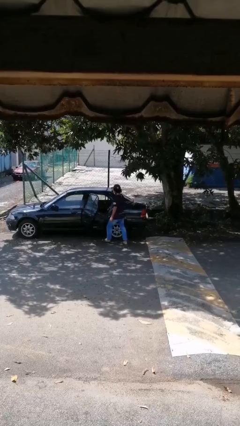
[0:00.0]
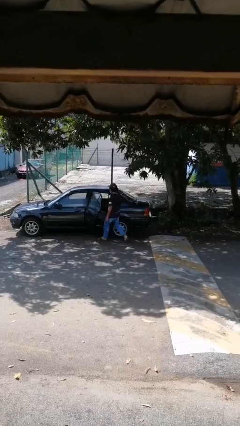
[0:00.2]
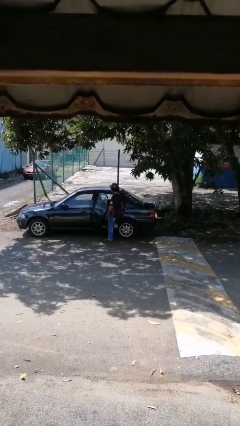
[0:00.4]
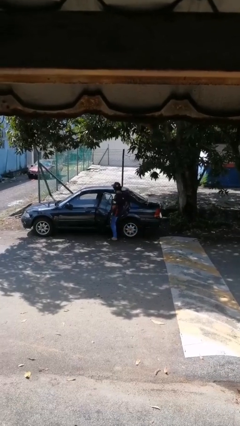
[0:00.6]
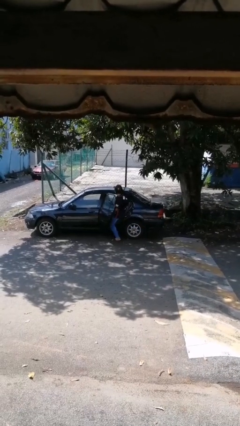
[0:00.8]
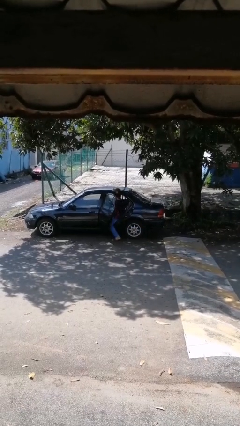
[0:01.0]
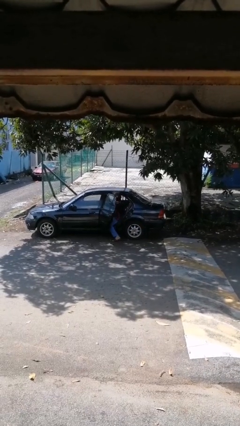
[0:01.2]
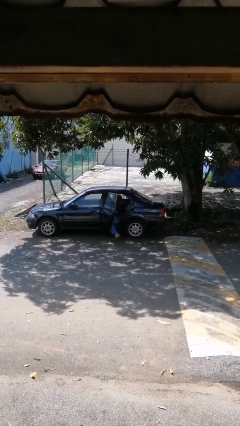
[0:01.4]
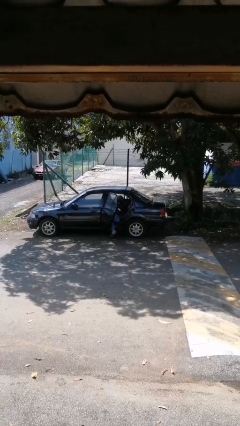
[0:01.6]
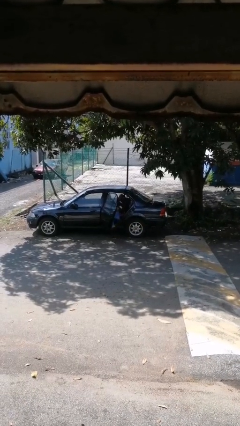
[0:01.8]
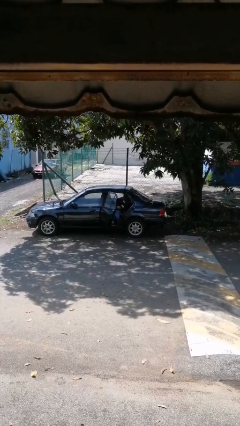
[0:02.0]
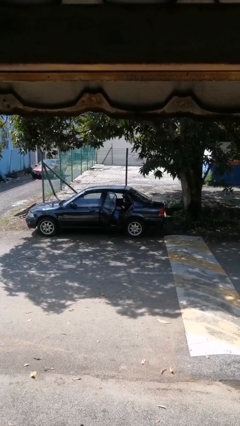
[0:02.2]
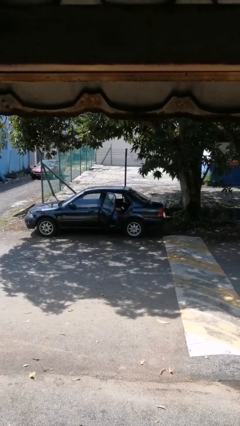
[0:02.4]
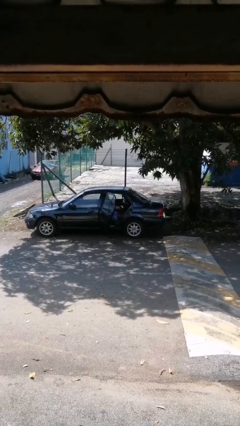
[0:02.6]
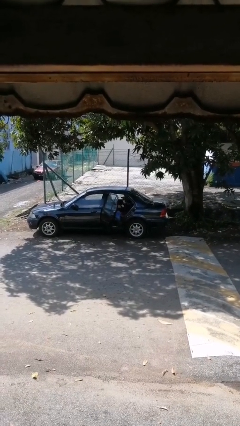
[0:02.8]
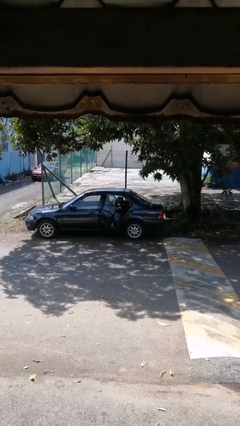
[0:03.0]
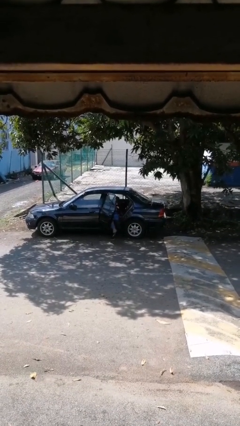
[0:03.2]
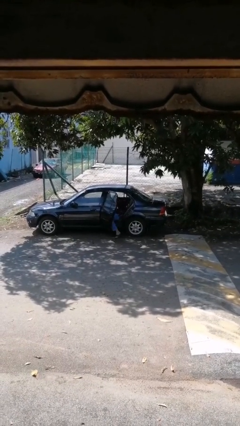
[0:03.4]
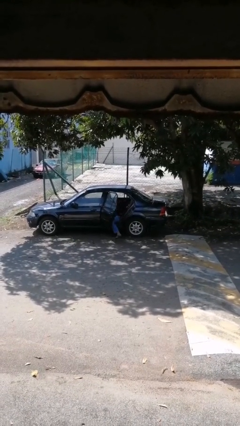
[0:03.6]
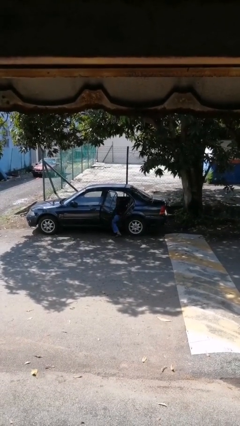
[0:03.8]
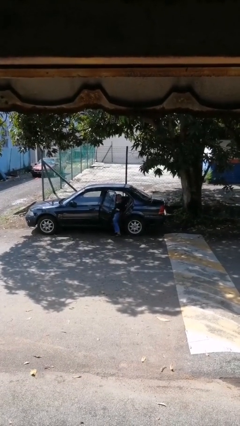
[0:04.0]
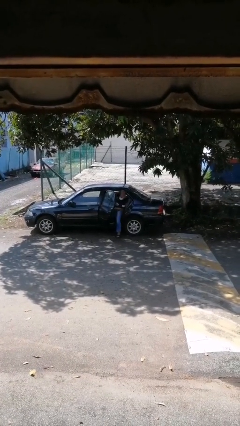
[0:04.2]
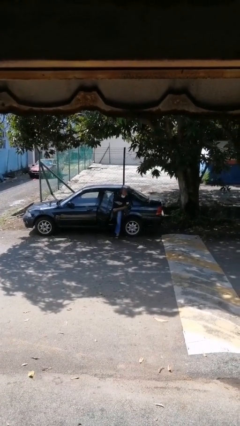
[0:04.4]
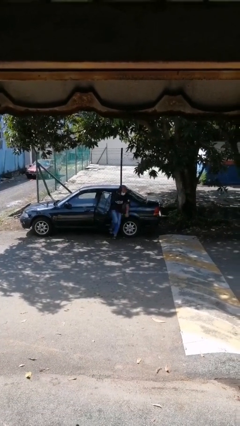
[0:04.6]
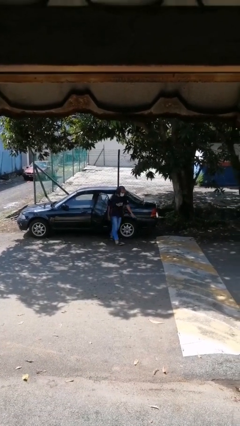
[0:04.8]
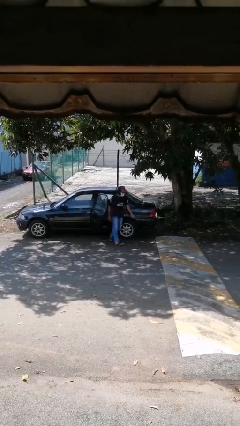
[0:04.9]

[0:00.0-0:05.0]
person enters car

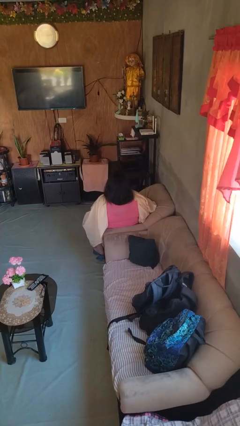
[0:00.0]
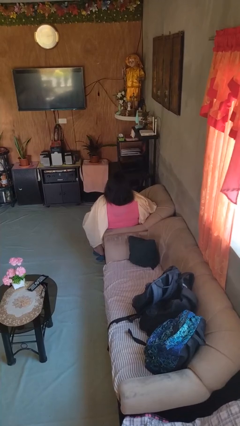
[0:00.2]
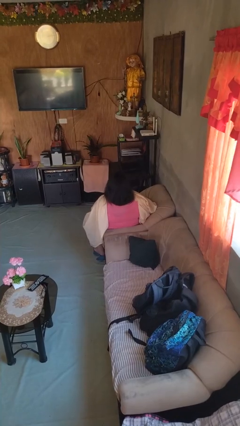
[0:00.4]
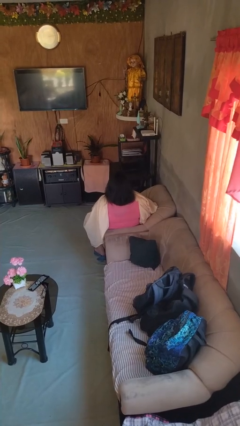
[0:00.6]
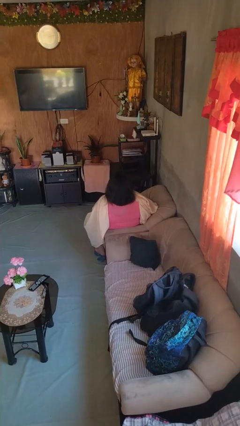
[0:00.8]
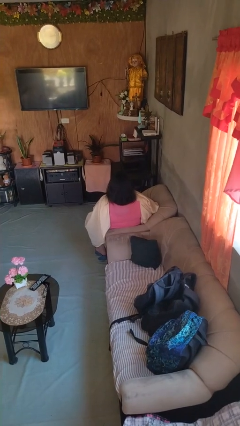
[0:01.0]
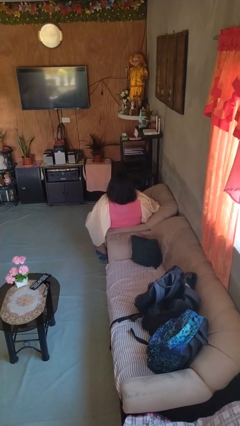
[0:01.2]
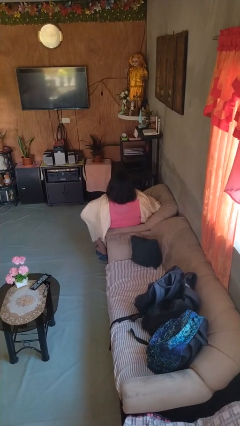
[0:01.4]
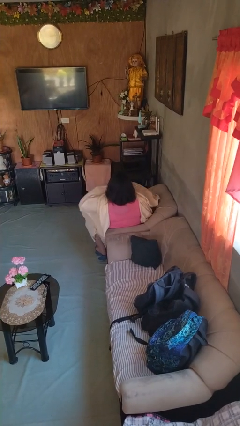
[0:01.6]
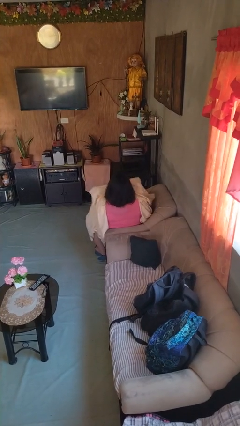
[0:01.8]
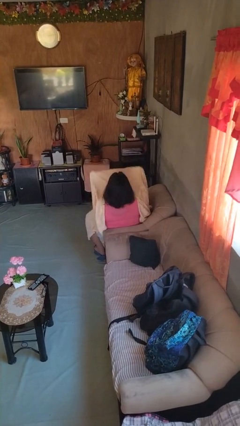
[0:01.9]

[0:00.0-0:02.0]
person uncovers with blanket

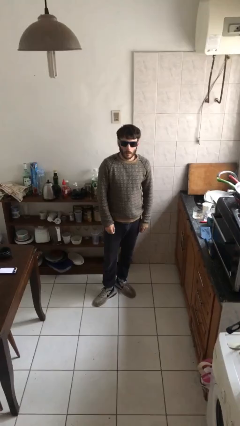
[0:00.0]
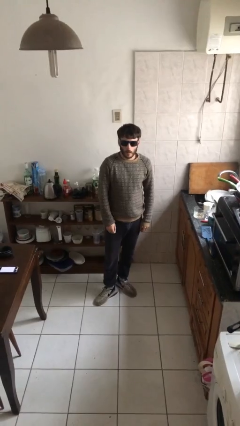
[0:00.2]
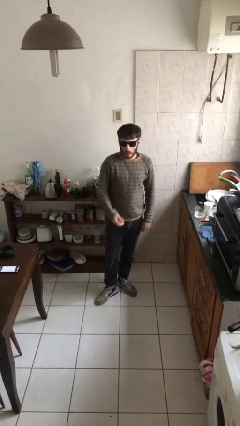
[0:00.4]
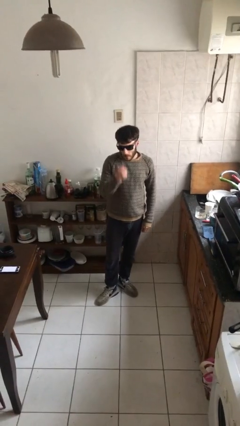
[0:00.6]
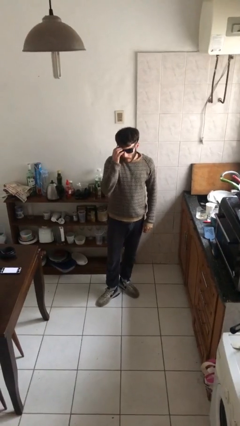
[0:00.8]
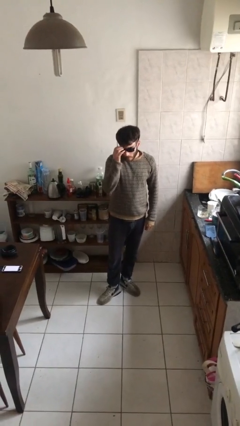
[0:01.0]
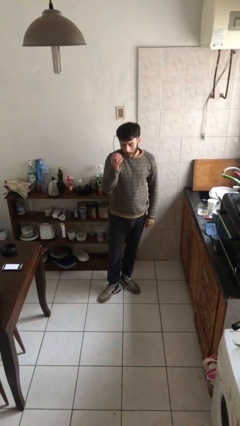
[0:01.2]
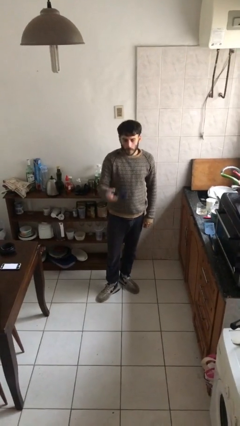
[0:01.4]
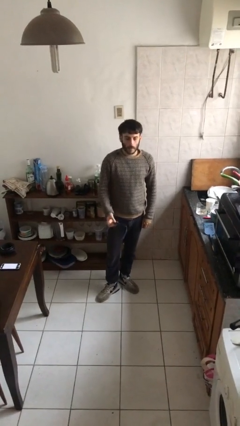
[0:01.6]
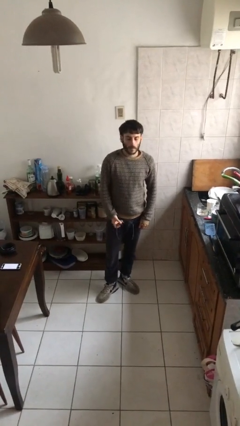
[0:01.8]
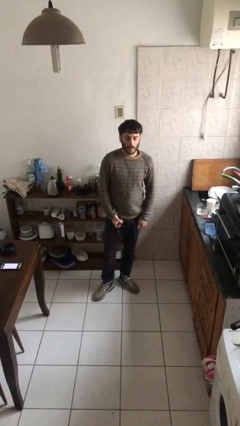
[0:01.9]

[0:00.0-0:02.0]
person takes off sunglasses

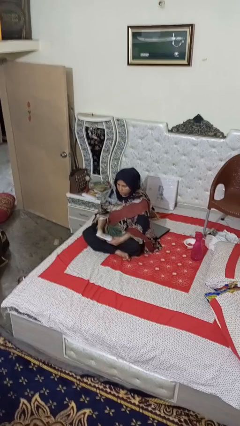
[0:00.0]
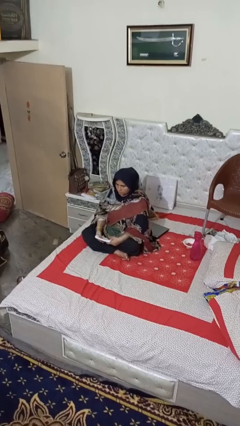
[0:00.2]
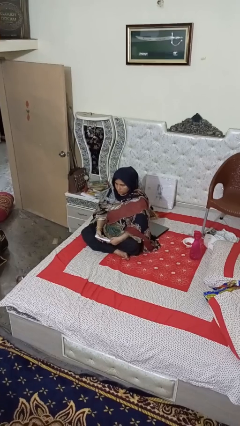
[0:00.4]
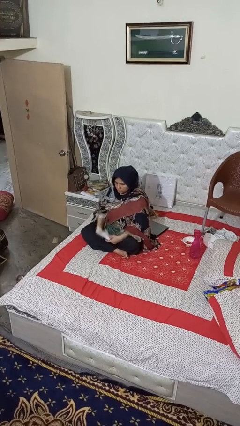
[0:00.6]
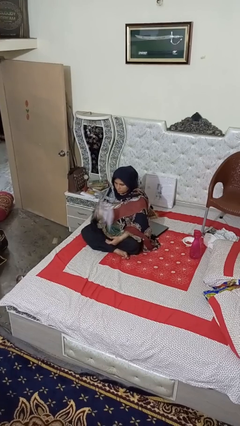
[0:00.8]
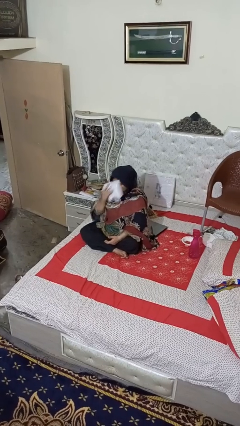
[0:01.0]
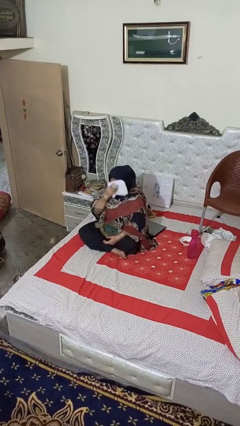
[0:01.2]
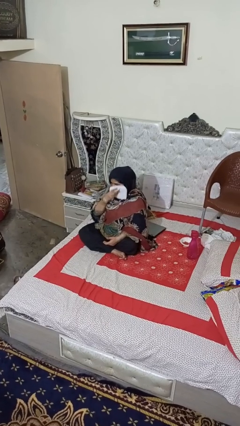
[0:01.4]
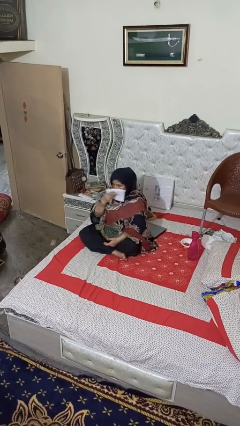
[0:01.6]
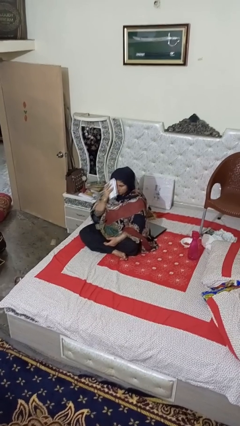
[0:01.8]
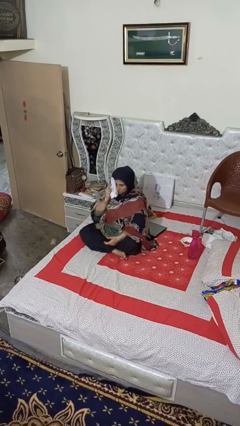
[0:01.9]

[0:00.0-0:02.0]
person wipes mouth with napkin

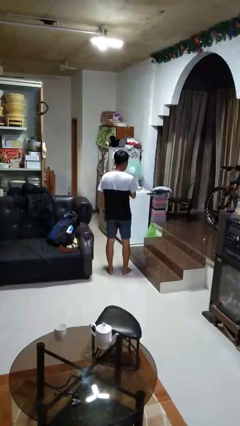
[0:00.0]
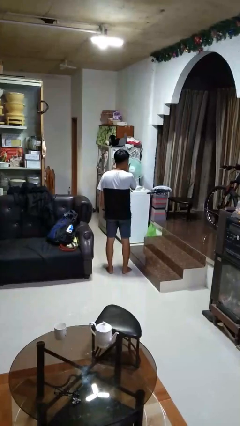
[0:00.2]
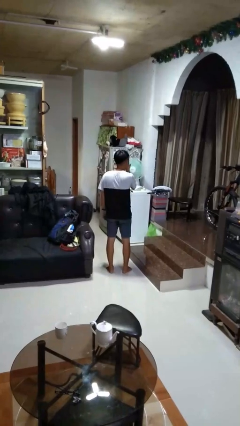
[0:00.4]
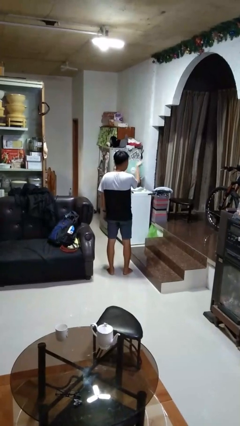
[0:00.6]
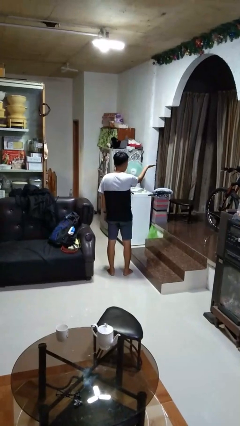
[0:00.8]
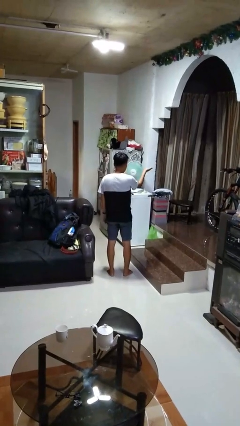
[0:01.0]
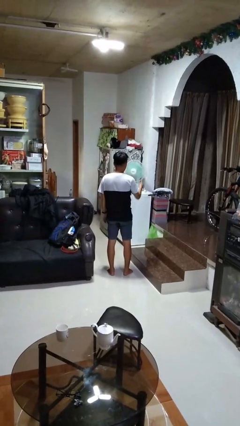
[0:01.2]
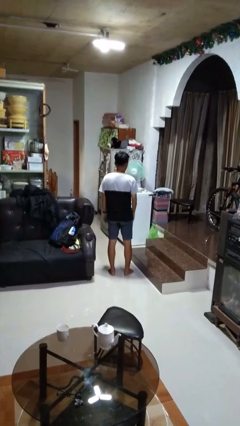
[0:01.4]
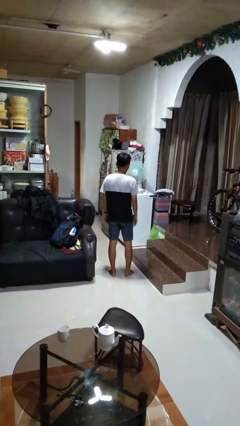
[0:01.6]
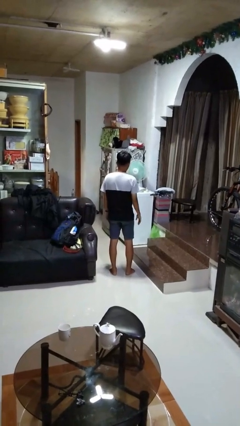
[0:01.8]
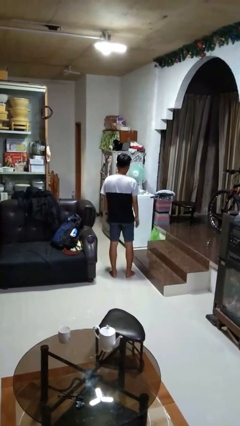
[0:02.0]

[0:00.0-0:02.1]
person gestures blow kiss

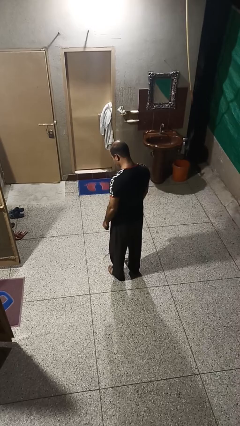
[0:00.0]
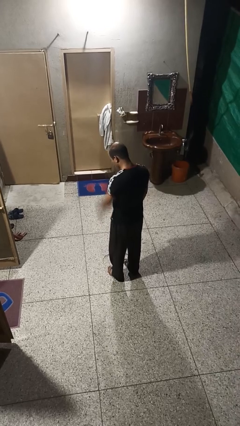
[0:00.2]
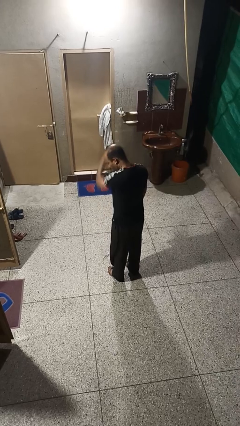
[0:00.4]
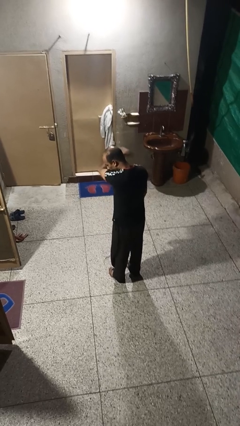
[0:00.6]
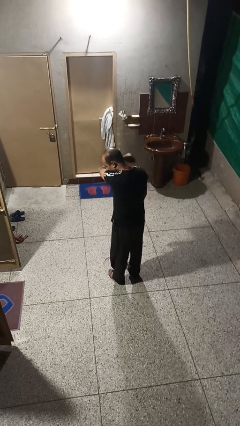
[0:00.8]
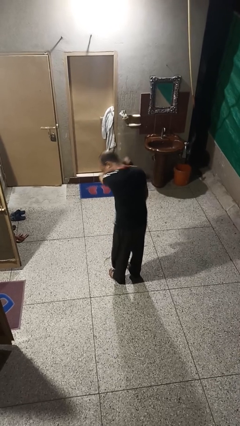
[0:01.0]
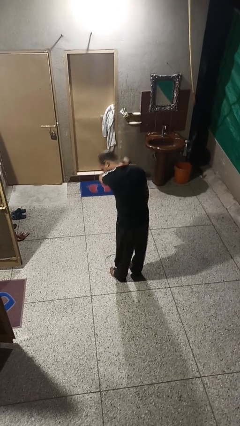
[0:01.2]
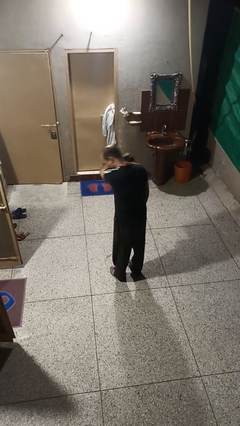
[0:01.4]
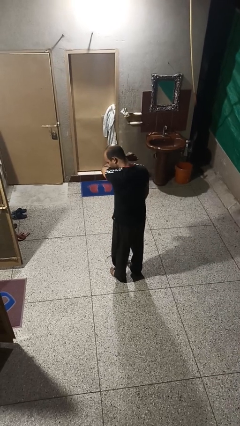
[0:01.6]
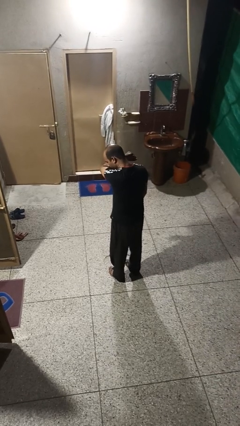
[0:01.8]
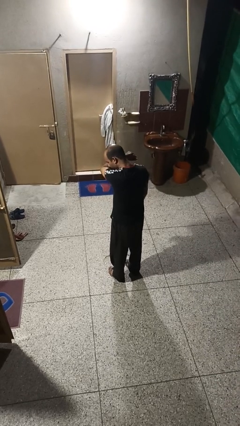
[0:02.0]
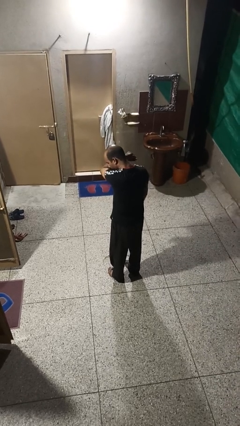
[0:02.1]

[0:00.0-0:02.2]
person sneezes into arm

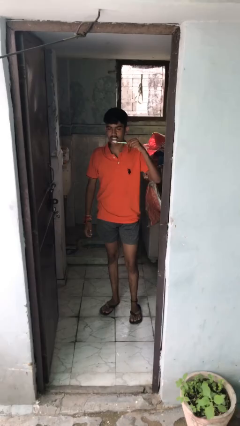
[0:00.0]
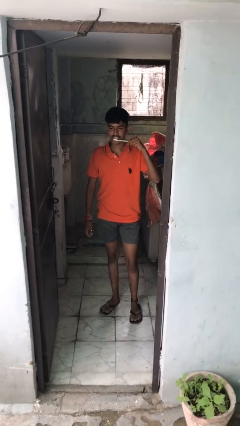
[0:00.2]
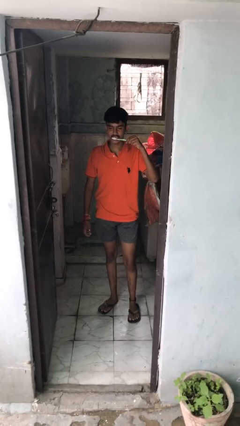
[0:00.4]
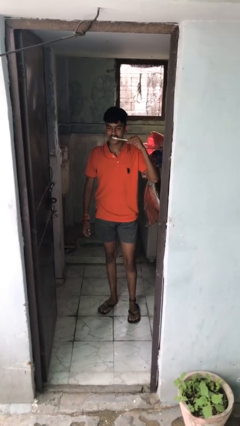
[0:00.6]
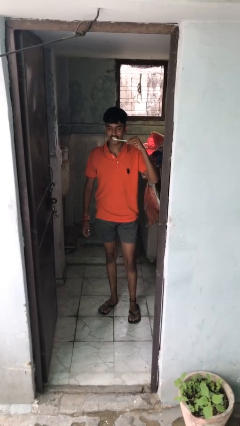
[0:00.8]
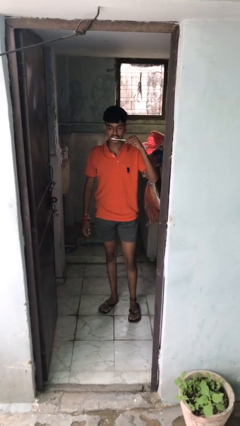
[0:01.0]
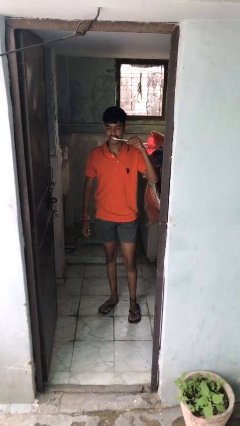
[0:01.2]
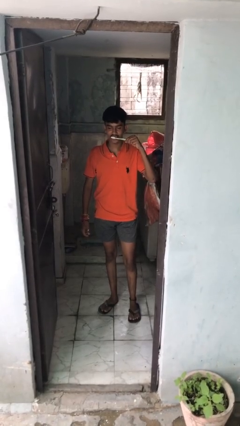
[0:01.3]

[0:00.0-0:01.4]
person brushes teeth
